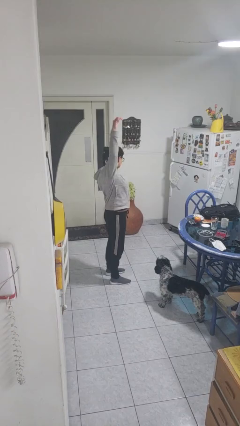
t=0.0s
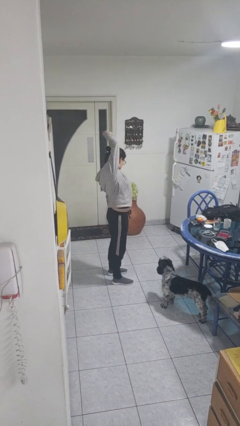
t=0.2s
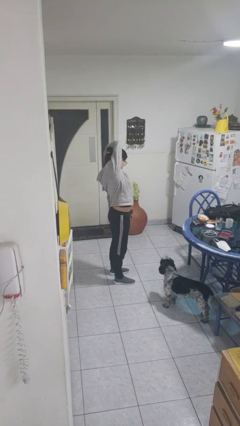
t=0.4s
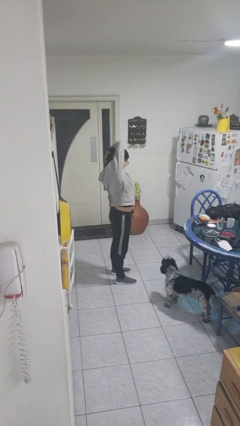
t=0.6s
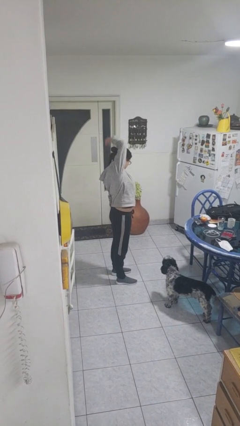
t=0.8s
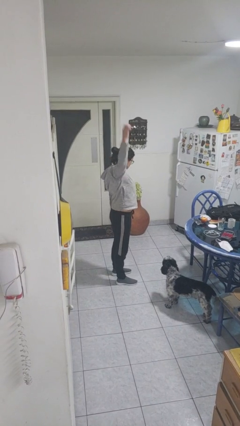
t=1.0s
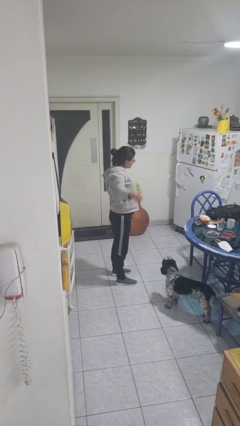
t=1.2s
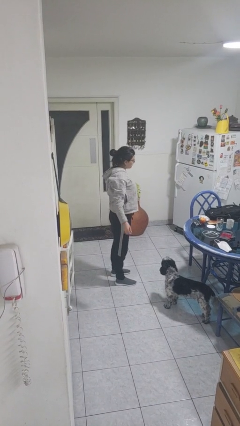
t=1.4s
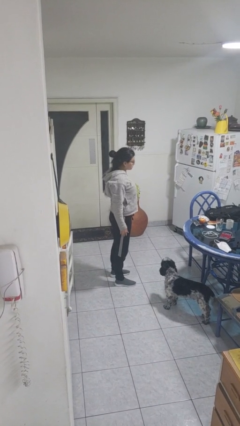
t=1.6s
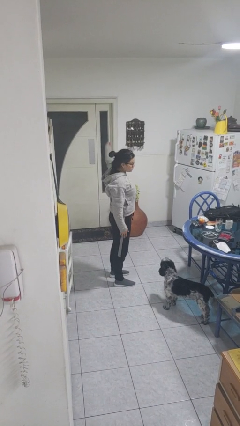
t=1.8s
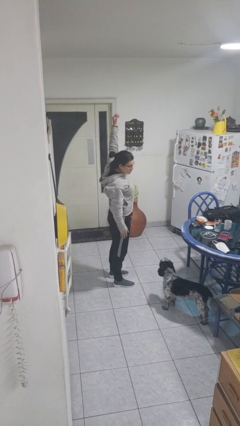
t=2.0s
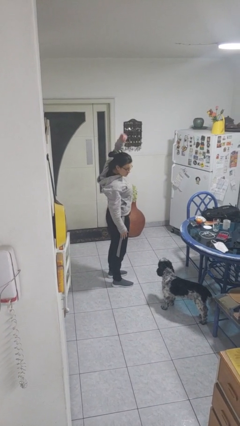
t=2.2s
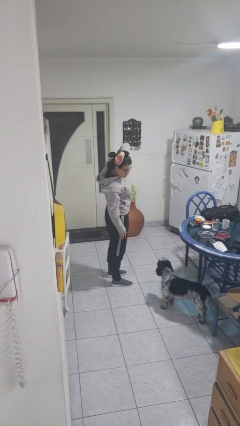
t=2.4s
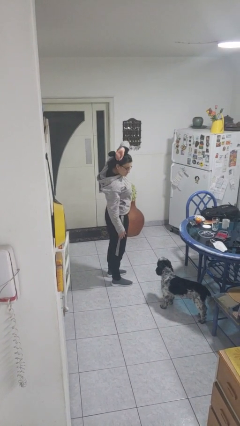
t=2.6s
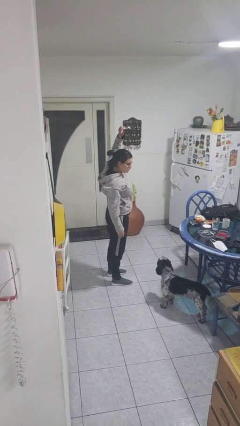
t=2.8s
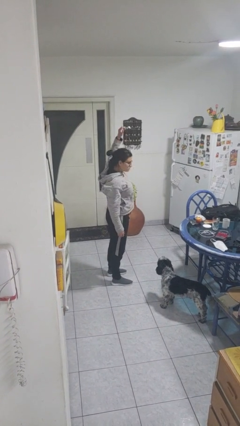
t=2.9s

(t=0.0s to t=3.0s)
person stretches arms over head

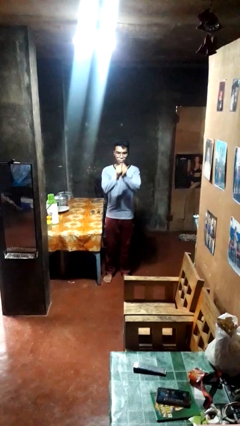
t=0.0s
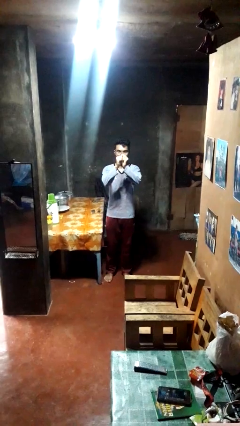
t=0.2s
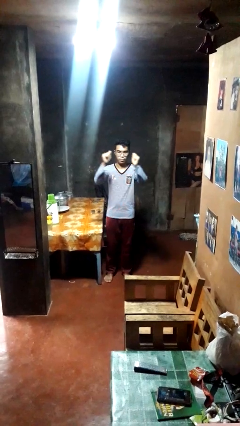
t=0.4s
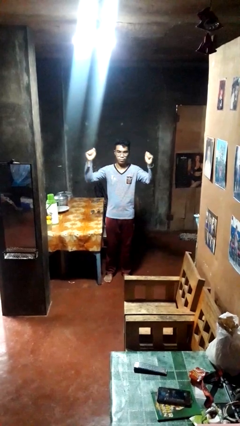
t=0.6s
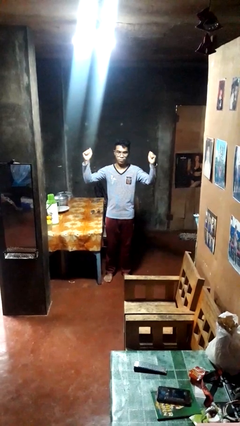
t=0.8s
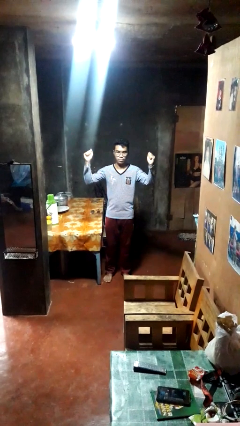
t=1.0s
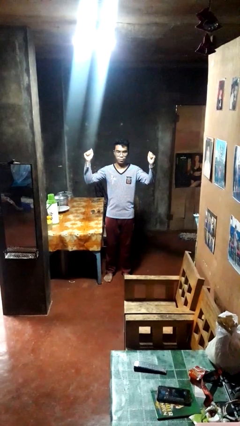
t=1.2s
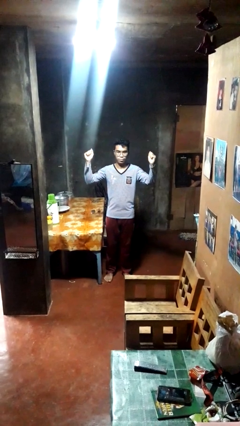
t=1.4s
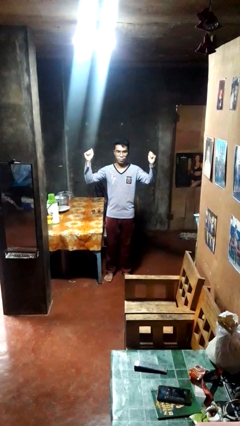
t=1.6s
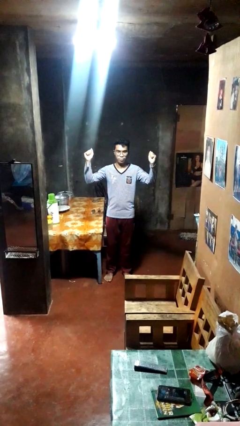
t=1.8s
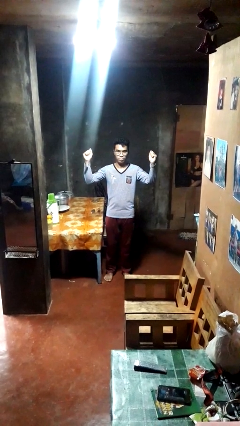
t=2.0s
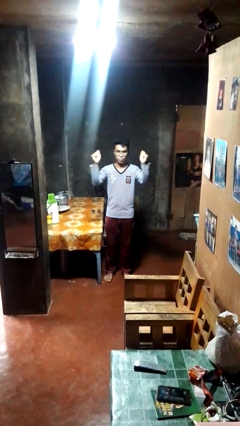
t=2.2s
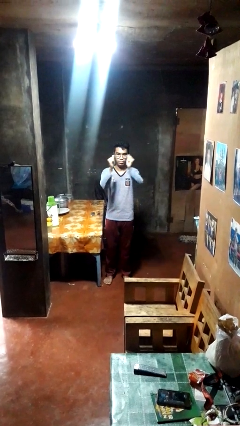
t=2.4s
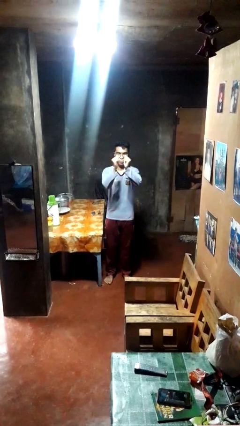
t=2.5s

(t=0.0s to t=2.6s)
person gestures zoom in

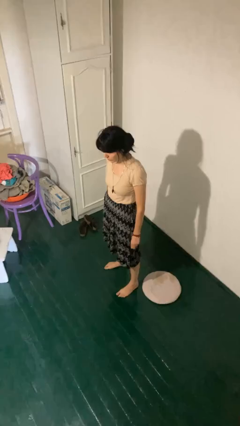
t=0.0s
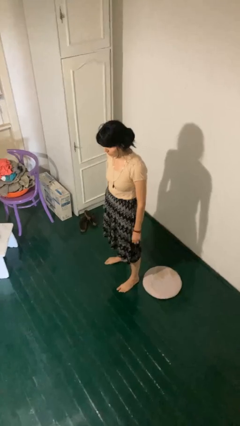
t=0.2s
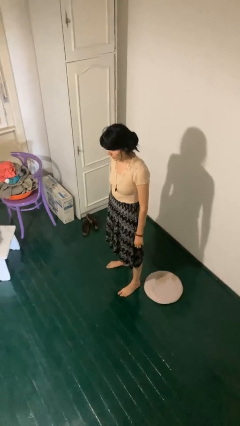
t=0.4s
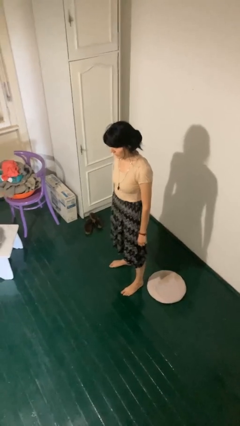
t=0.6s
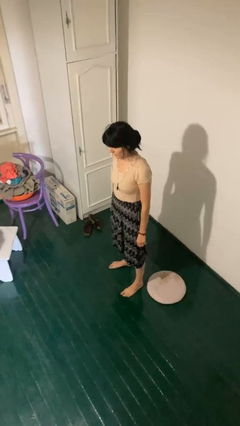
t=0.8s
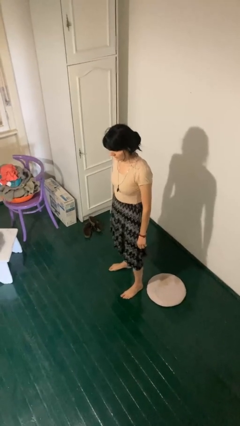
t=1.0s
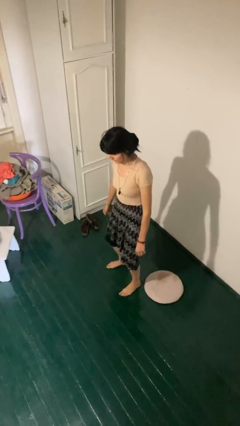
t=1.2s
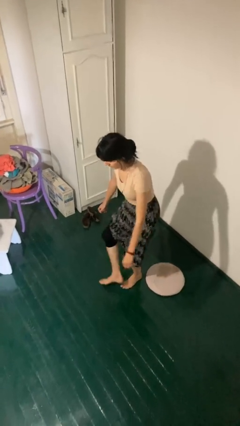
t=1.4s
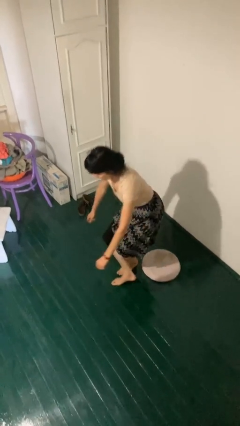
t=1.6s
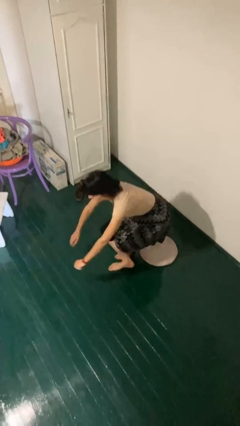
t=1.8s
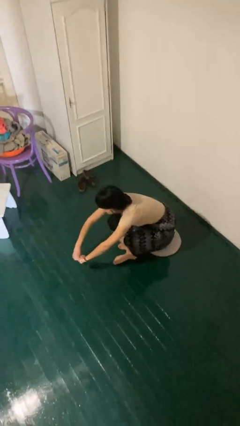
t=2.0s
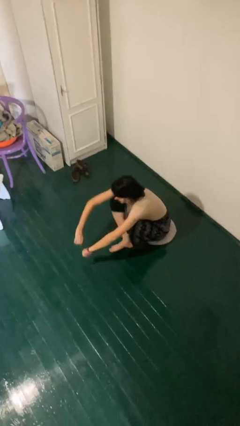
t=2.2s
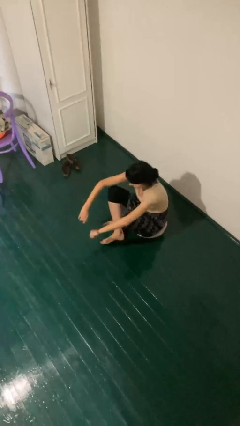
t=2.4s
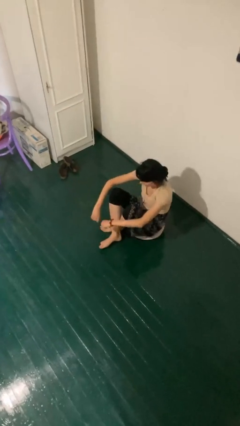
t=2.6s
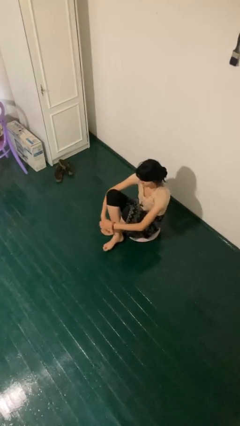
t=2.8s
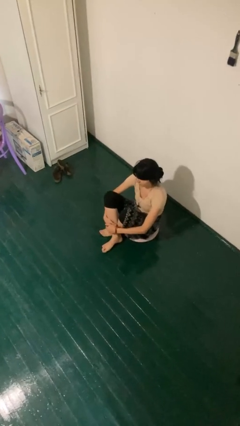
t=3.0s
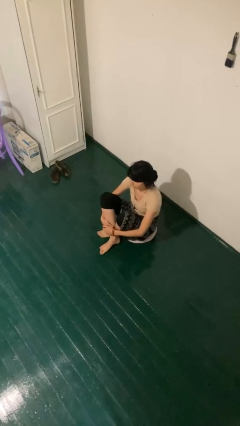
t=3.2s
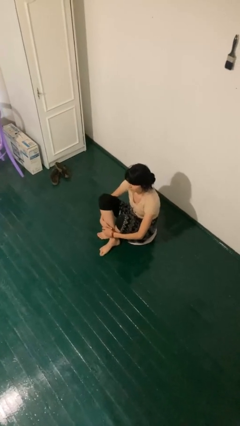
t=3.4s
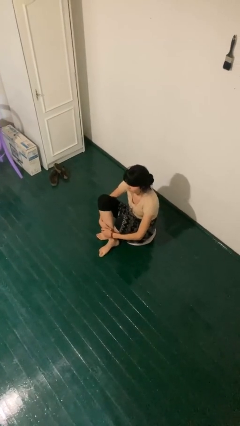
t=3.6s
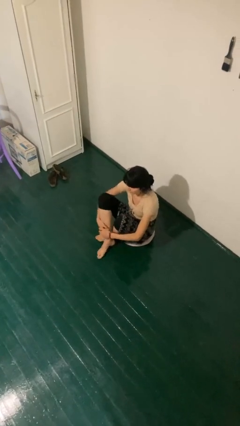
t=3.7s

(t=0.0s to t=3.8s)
person sits crisscross

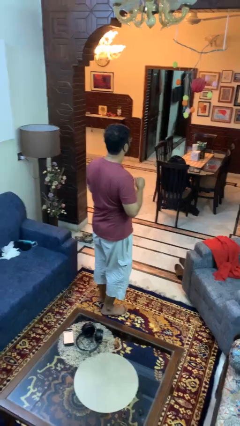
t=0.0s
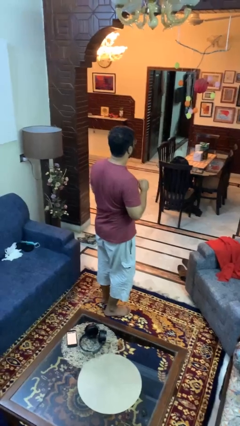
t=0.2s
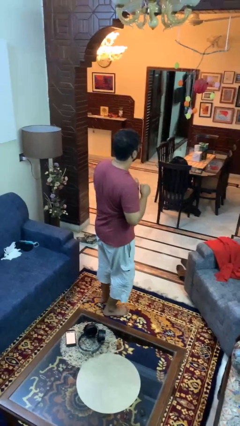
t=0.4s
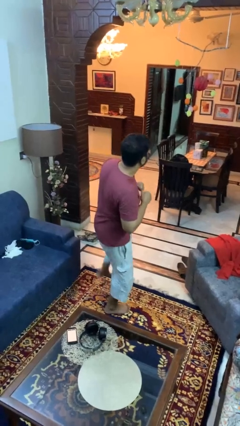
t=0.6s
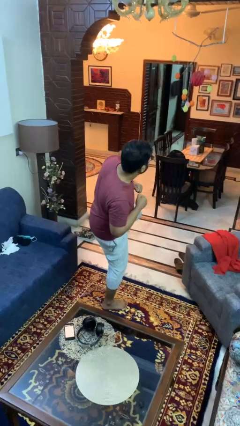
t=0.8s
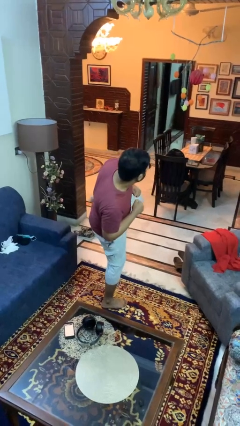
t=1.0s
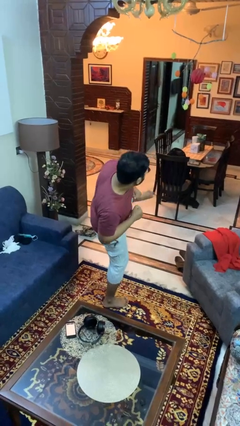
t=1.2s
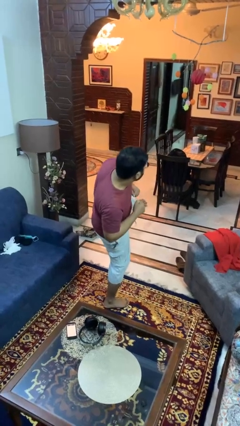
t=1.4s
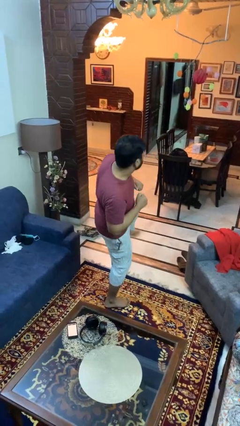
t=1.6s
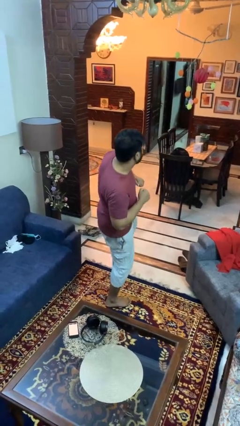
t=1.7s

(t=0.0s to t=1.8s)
person karate kicks

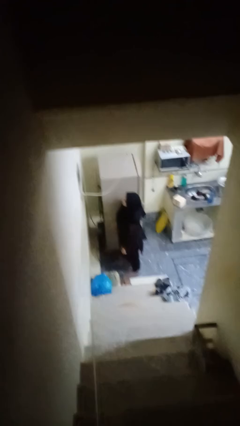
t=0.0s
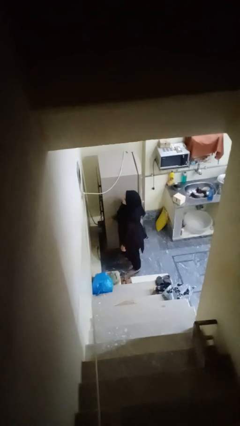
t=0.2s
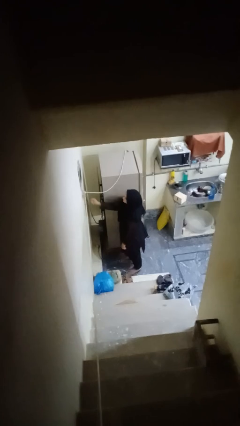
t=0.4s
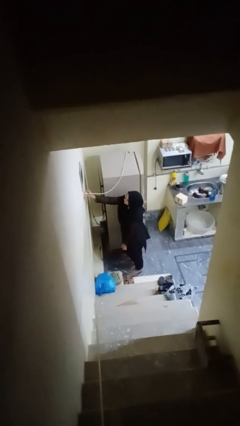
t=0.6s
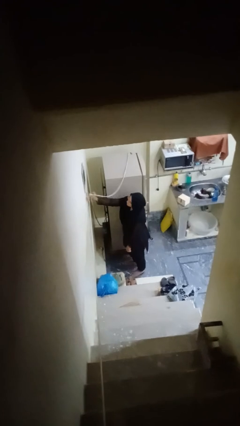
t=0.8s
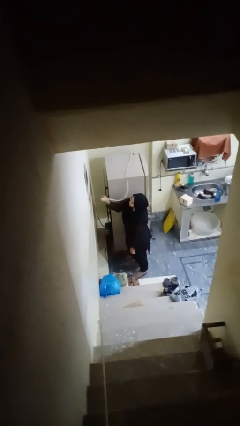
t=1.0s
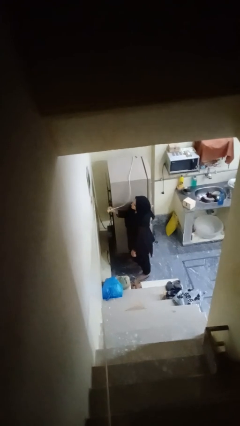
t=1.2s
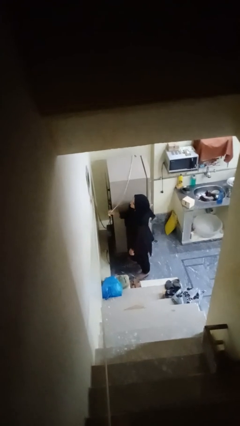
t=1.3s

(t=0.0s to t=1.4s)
person unplugs from electrical socket

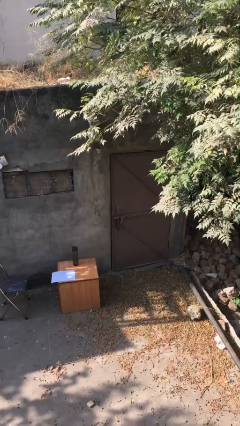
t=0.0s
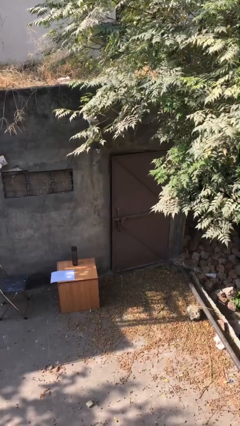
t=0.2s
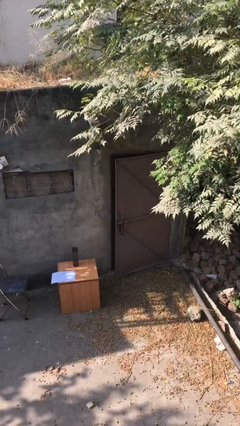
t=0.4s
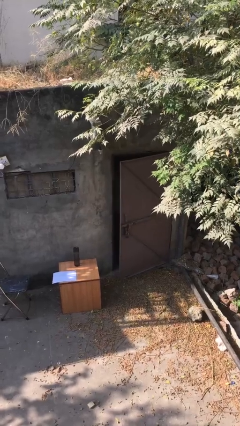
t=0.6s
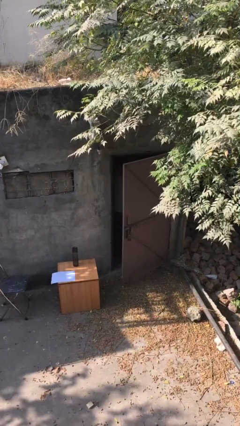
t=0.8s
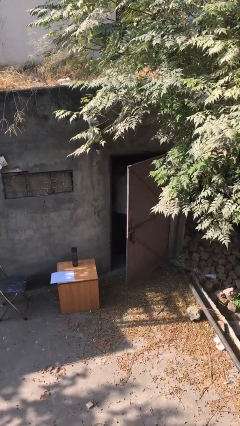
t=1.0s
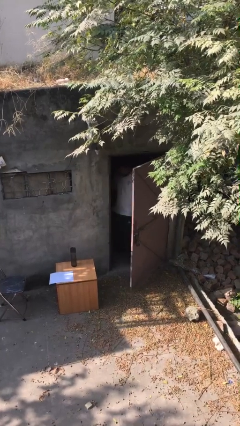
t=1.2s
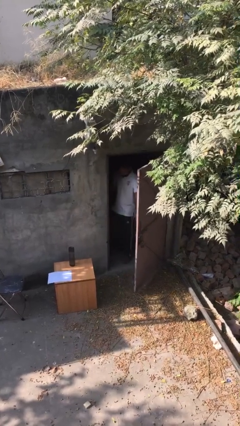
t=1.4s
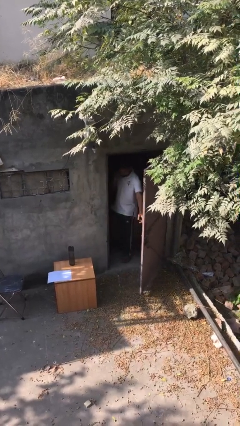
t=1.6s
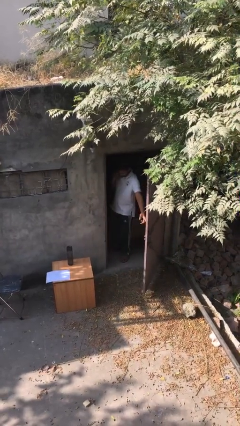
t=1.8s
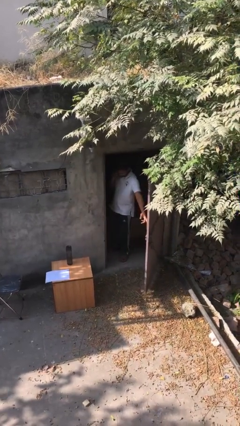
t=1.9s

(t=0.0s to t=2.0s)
person opens facility door

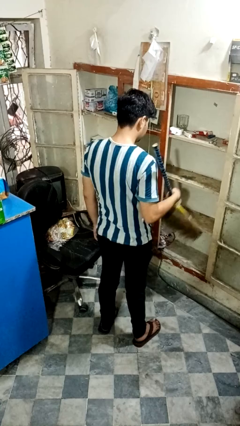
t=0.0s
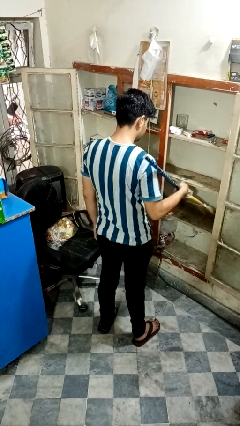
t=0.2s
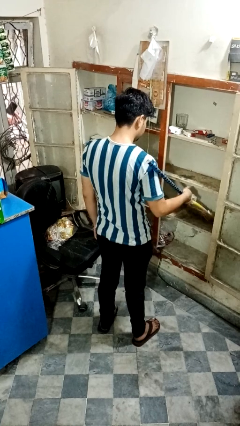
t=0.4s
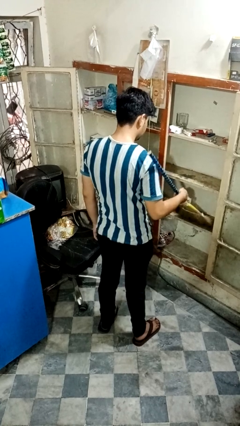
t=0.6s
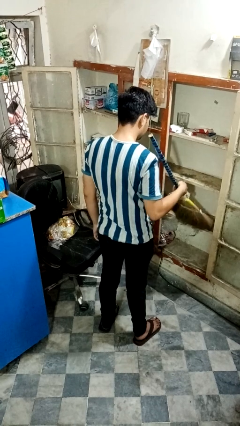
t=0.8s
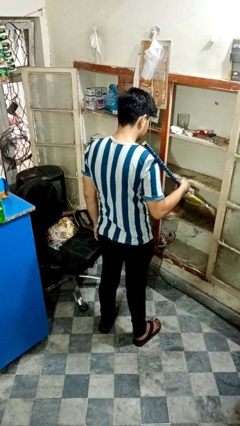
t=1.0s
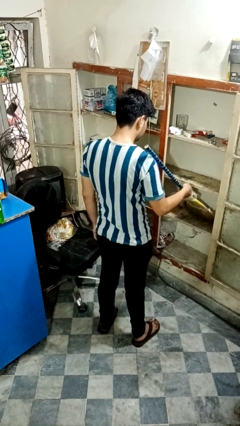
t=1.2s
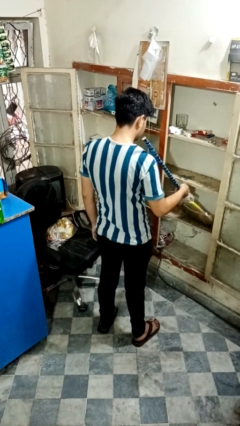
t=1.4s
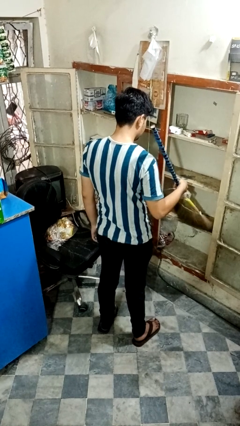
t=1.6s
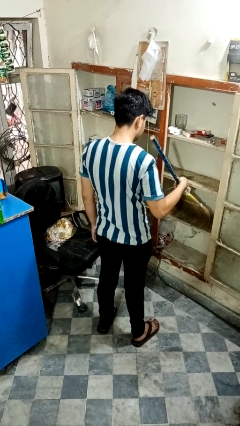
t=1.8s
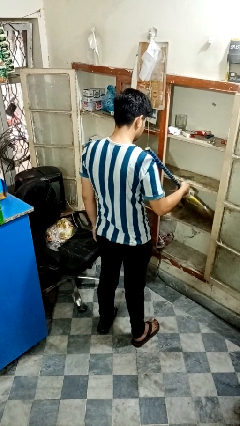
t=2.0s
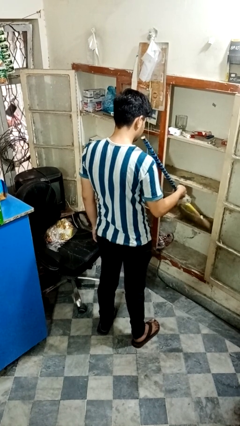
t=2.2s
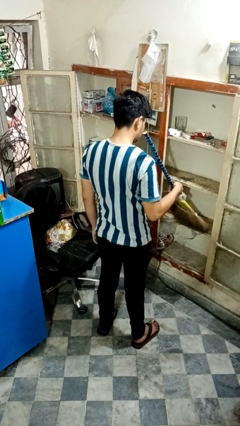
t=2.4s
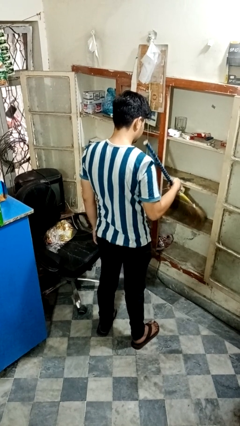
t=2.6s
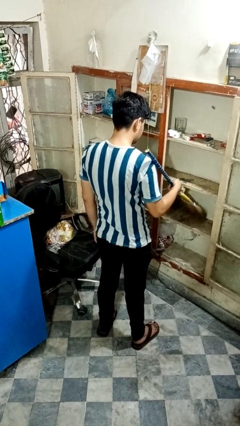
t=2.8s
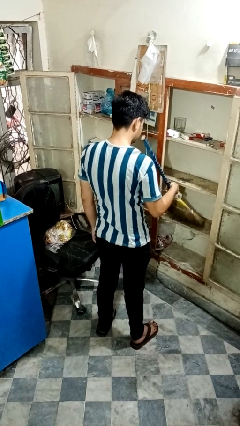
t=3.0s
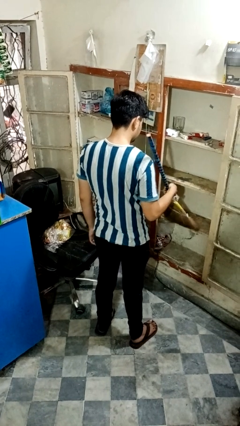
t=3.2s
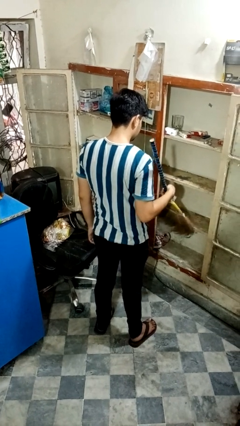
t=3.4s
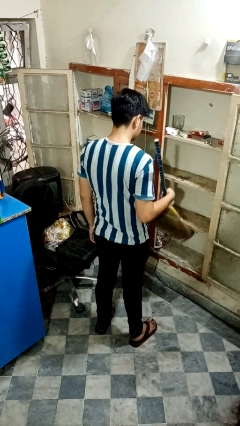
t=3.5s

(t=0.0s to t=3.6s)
person dusts furniture
